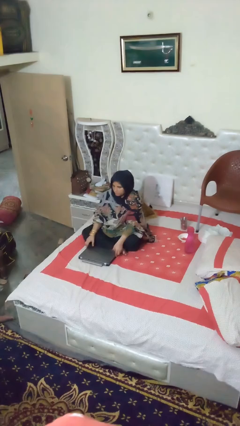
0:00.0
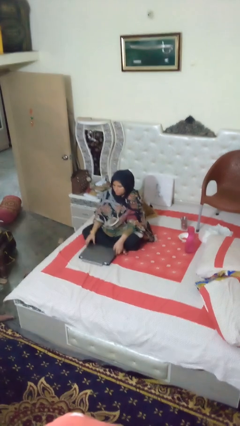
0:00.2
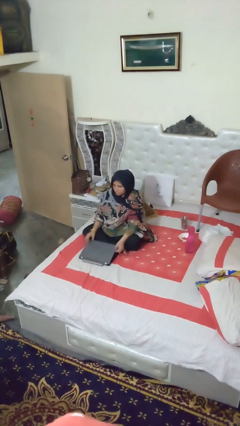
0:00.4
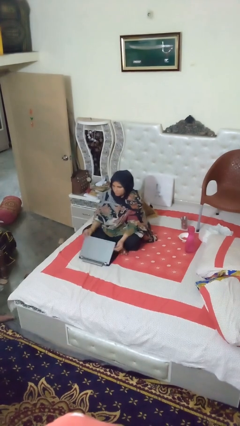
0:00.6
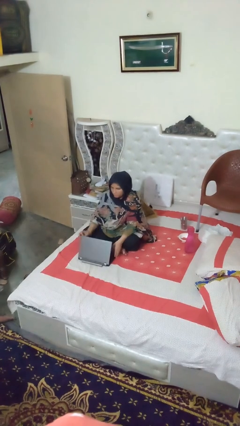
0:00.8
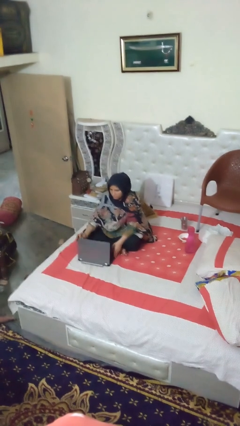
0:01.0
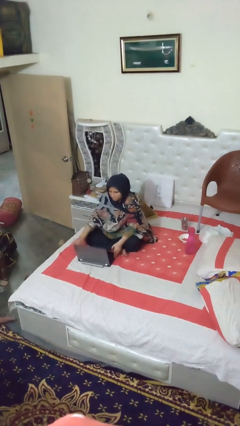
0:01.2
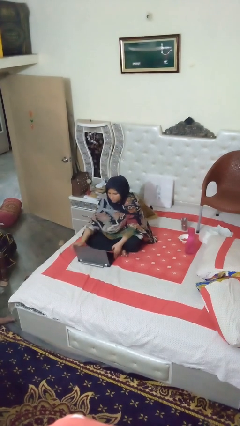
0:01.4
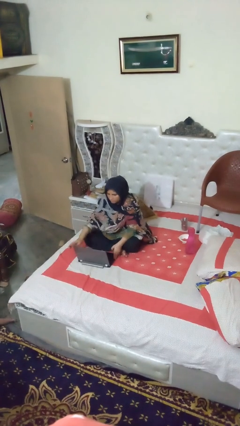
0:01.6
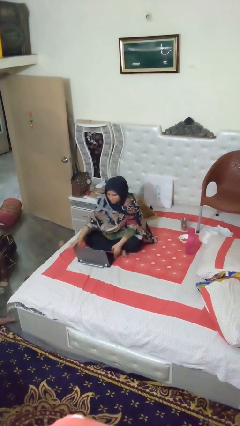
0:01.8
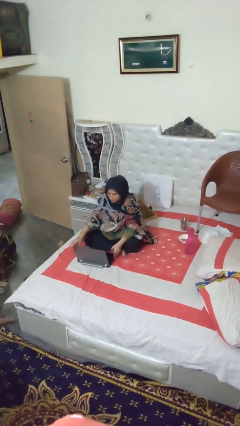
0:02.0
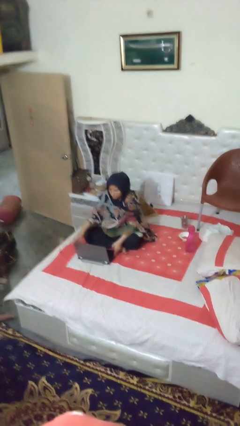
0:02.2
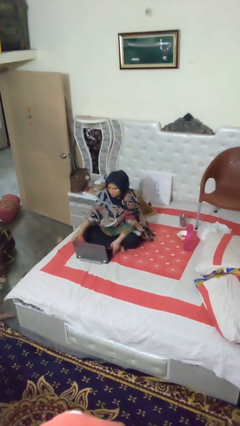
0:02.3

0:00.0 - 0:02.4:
person opens laptop

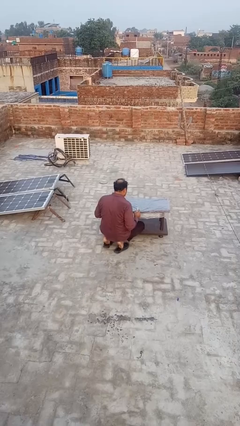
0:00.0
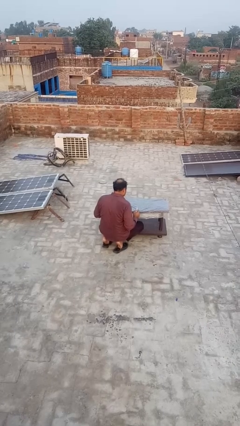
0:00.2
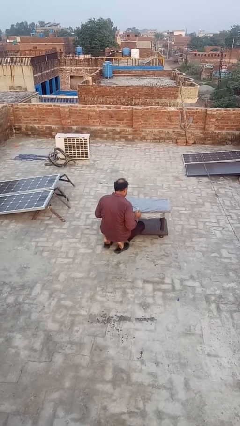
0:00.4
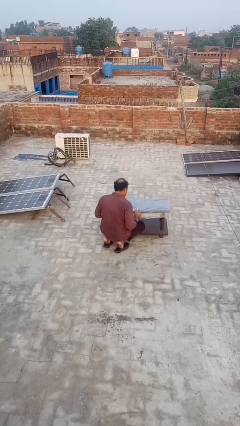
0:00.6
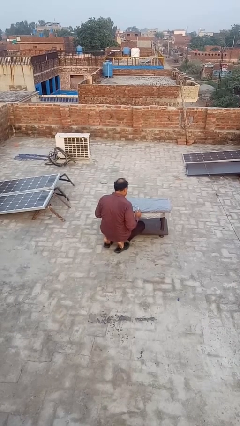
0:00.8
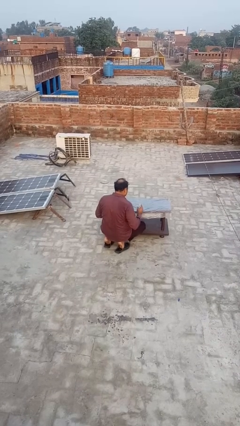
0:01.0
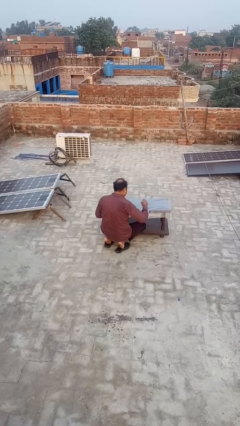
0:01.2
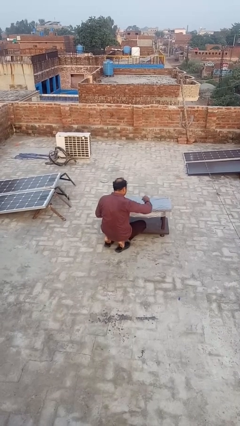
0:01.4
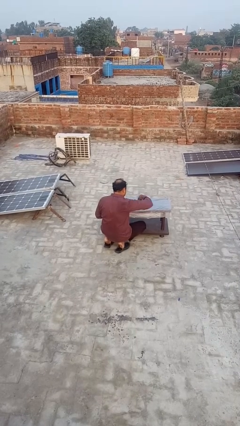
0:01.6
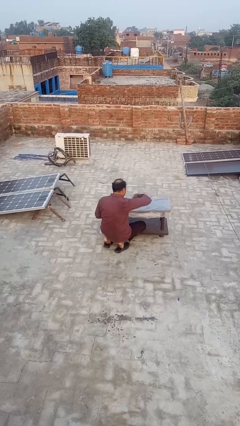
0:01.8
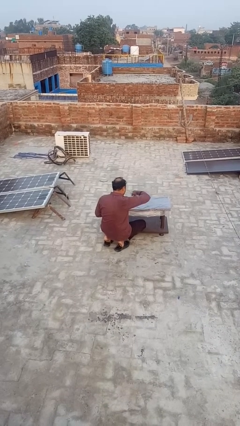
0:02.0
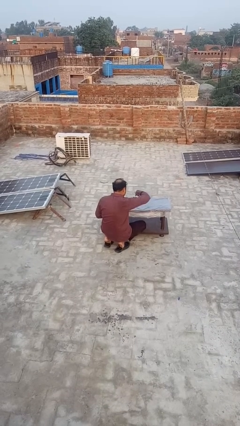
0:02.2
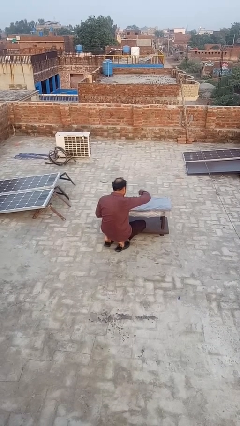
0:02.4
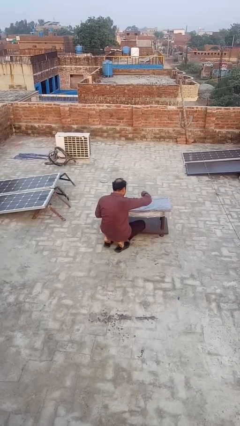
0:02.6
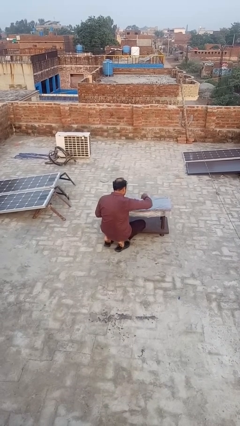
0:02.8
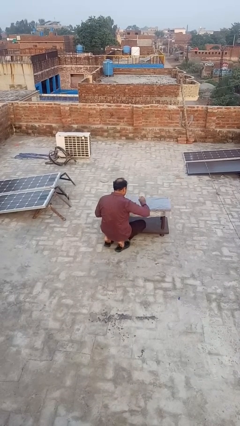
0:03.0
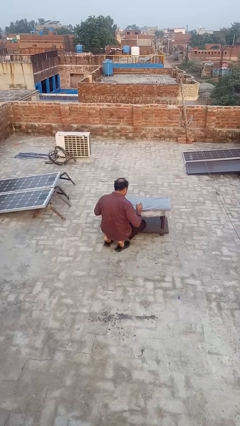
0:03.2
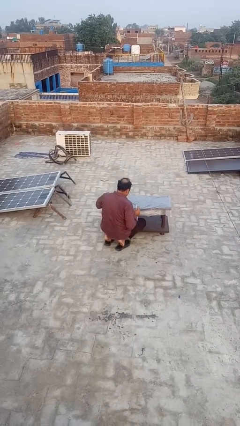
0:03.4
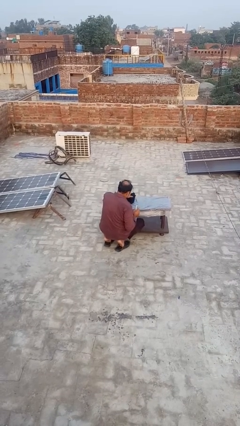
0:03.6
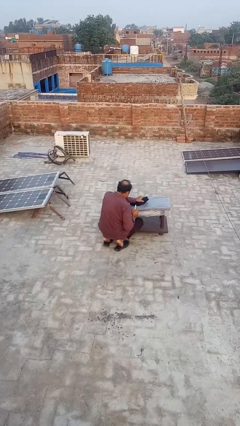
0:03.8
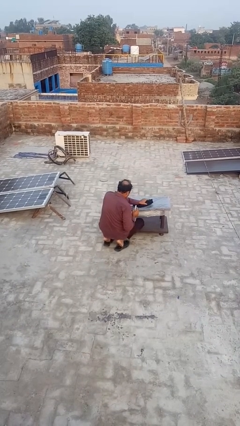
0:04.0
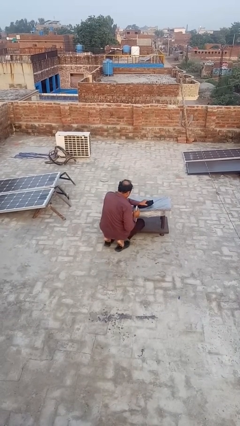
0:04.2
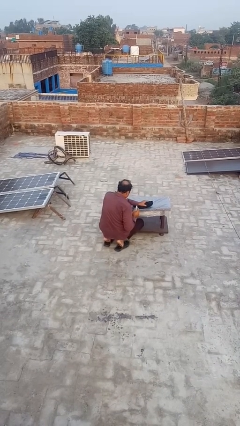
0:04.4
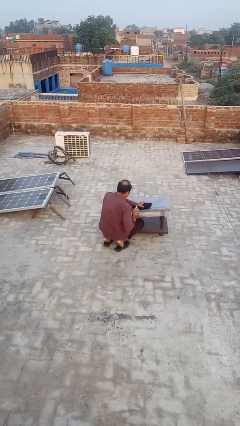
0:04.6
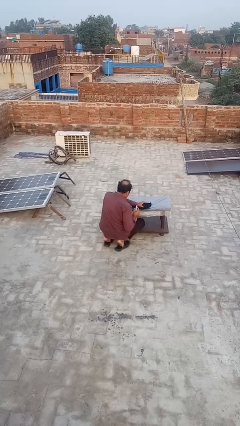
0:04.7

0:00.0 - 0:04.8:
person sprays from bottle

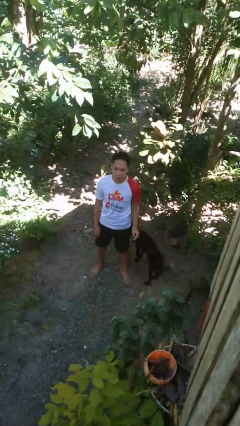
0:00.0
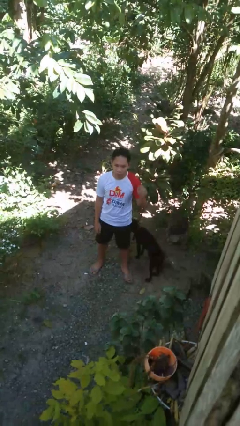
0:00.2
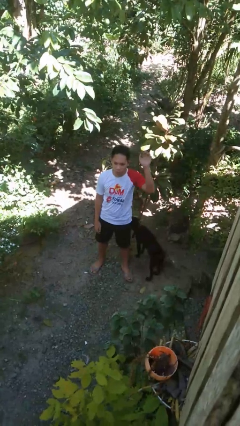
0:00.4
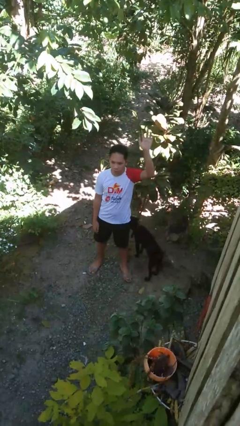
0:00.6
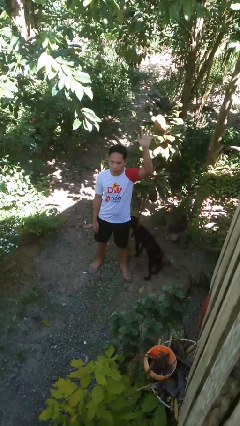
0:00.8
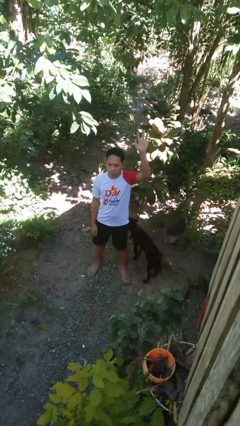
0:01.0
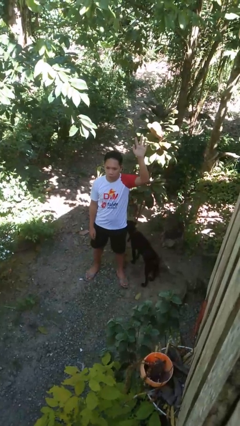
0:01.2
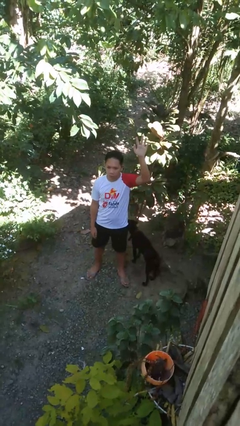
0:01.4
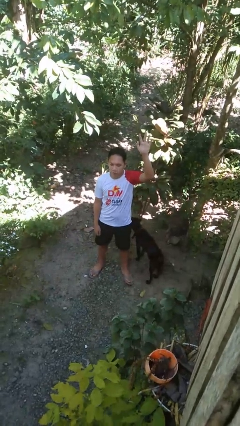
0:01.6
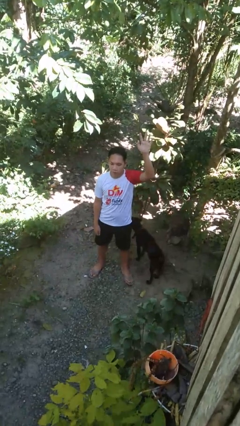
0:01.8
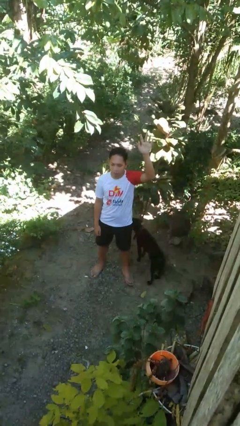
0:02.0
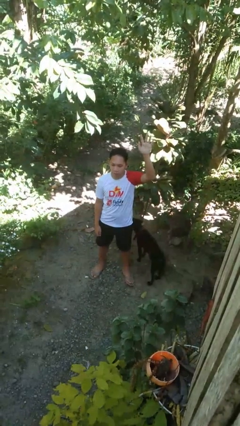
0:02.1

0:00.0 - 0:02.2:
person gestures raise hand

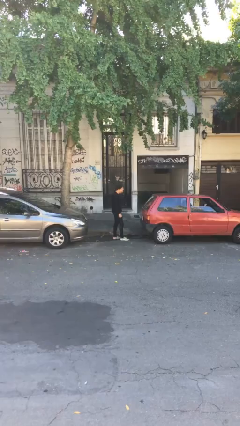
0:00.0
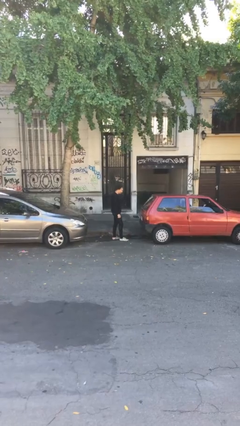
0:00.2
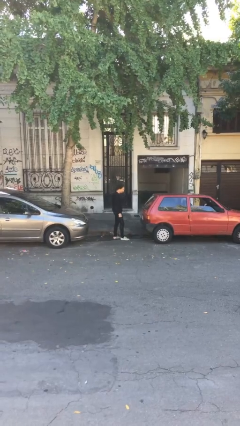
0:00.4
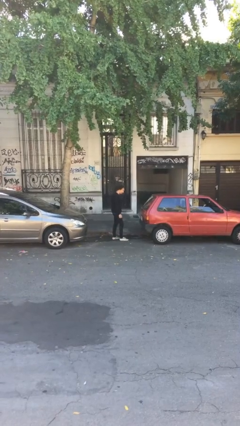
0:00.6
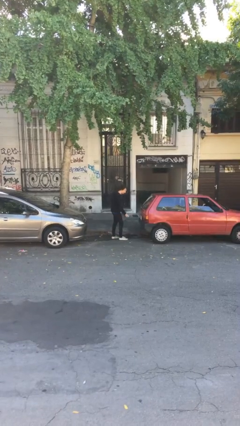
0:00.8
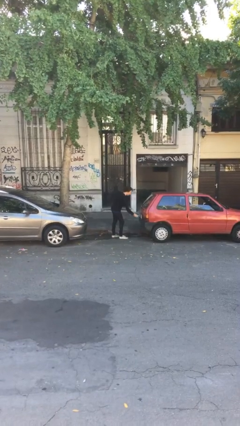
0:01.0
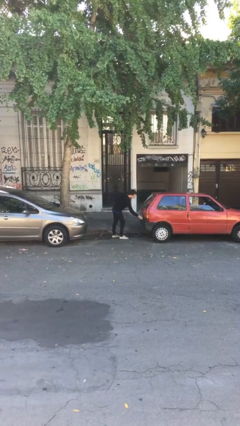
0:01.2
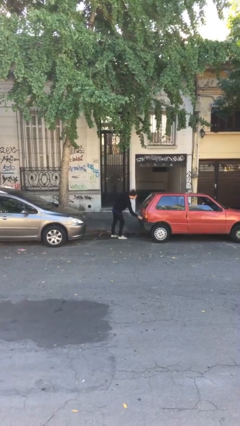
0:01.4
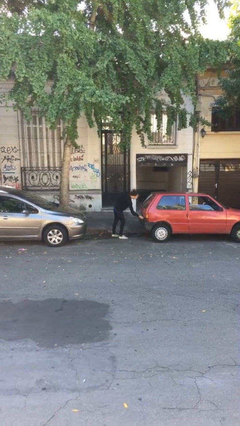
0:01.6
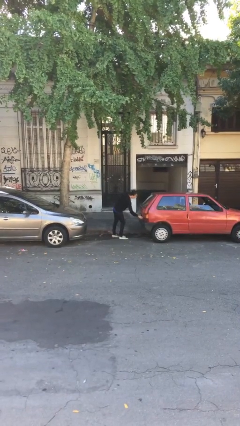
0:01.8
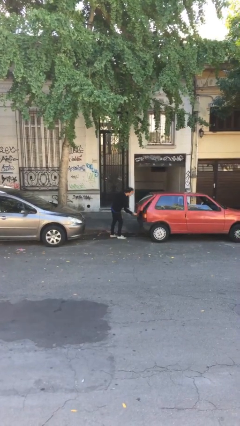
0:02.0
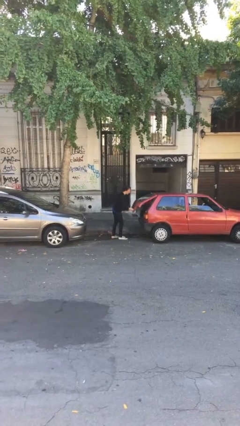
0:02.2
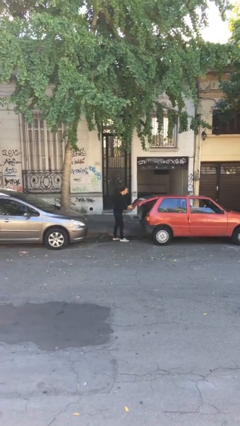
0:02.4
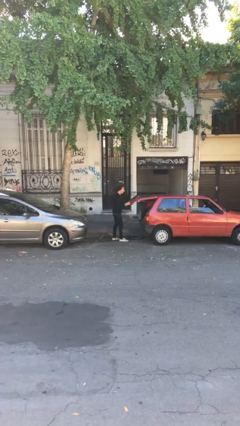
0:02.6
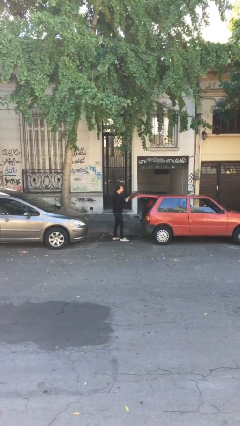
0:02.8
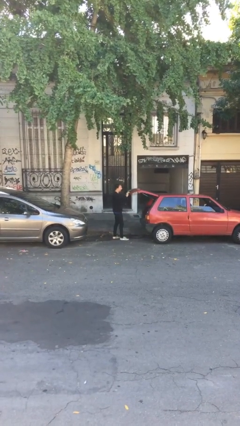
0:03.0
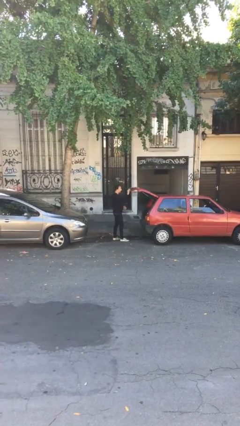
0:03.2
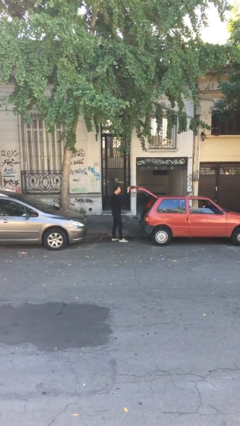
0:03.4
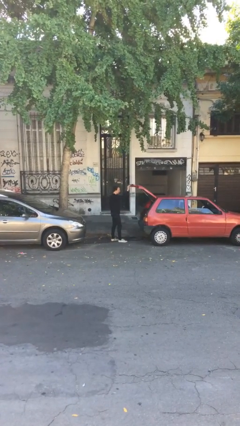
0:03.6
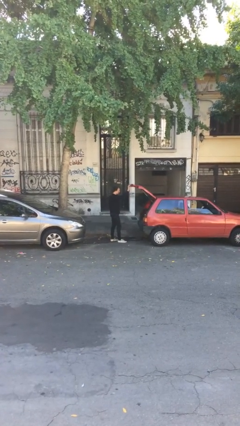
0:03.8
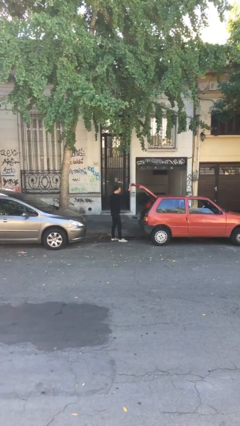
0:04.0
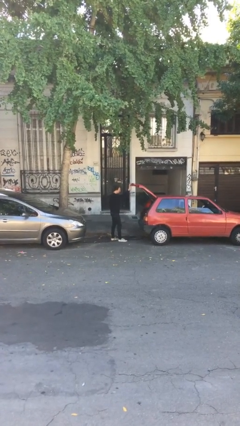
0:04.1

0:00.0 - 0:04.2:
person opens car trunk

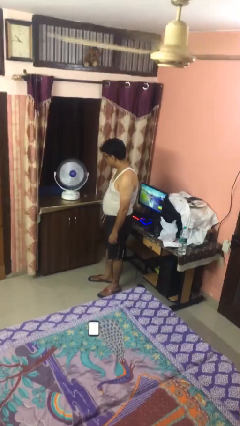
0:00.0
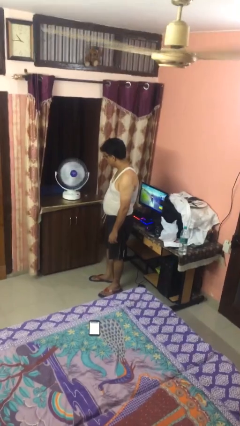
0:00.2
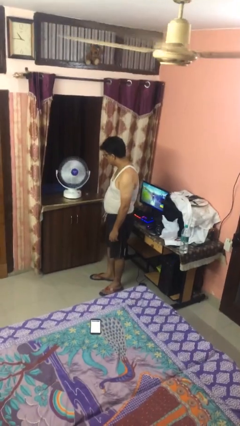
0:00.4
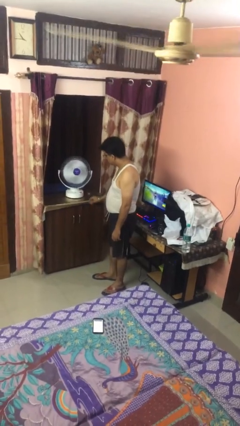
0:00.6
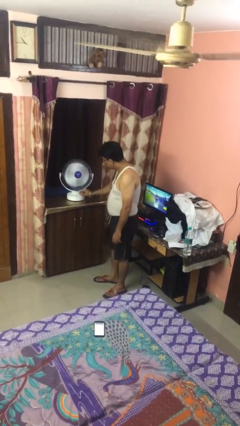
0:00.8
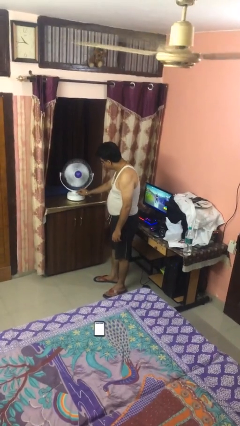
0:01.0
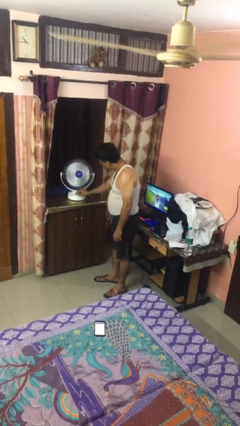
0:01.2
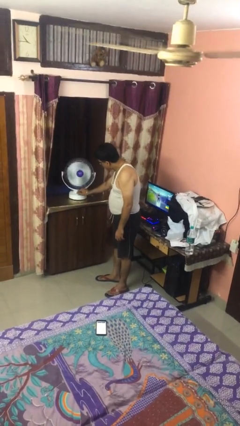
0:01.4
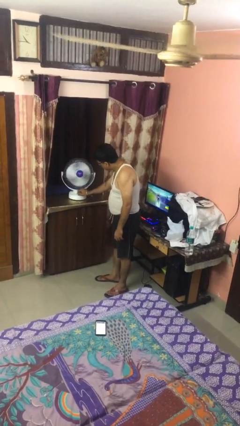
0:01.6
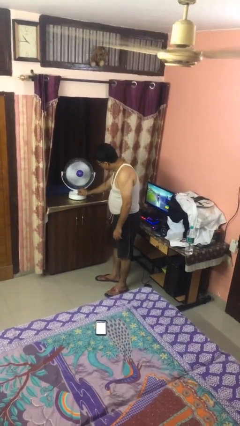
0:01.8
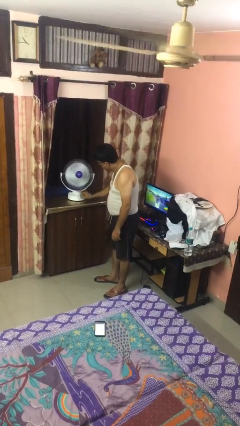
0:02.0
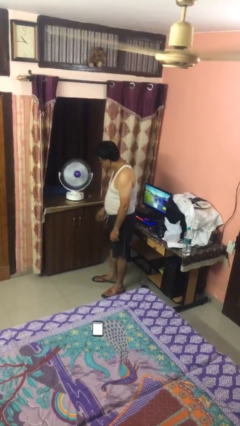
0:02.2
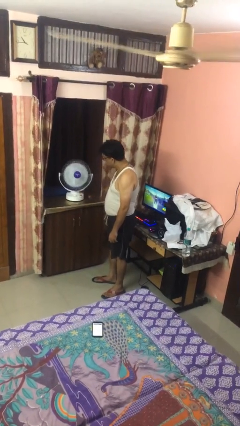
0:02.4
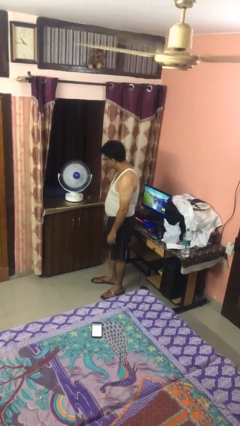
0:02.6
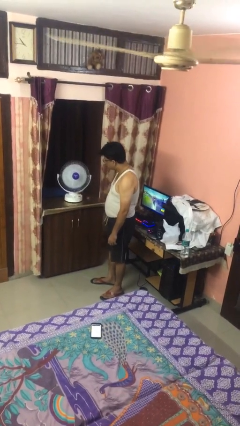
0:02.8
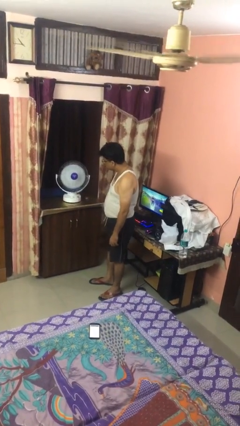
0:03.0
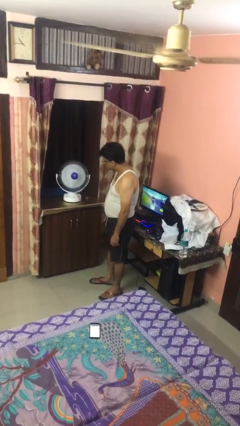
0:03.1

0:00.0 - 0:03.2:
person turns on fan

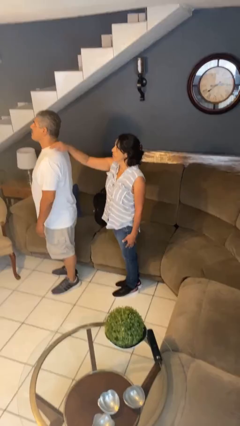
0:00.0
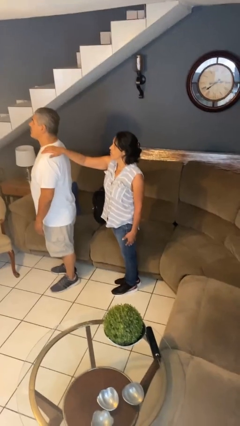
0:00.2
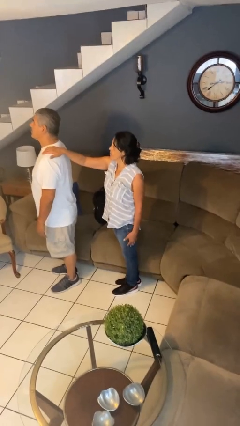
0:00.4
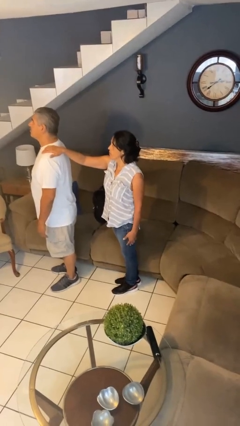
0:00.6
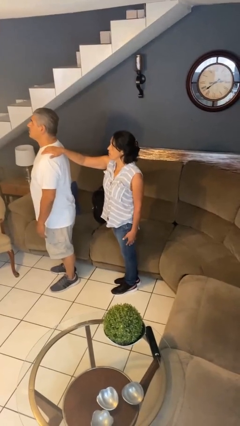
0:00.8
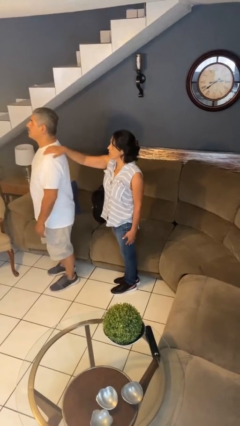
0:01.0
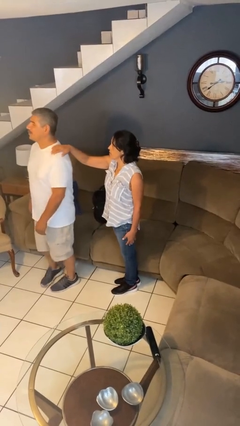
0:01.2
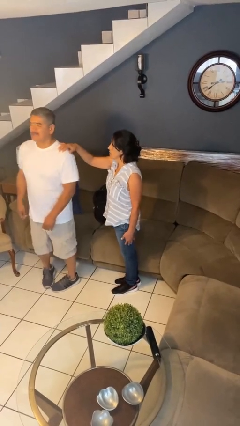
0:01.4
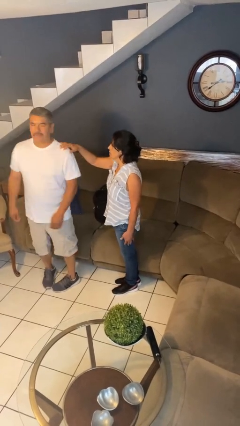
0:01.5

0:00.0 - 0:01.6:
person grabs person by shoulder
